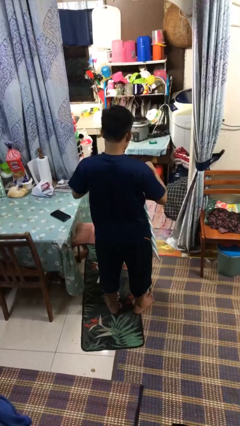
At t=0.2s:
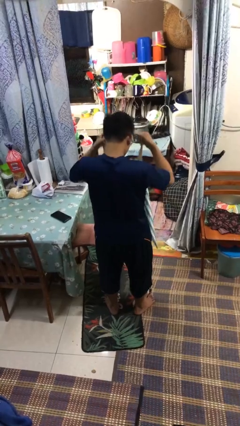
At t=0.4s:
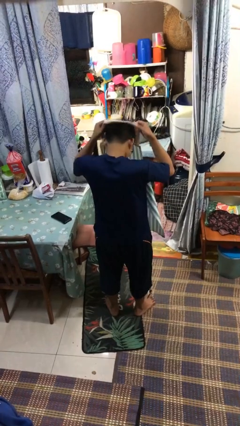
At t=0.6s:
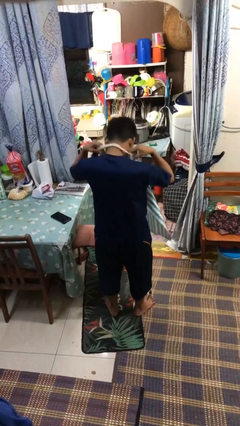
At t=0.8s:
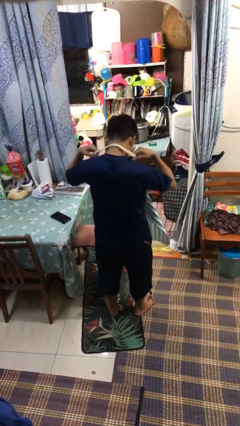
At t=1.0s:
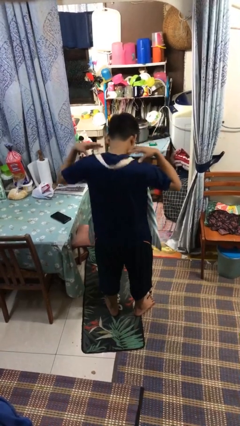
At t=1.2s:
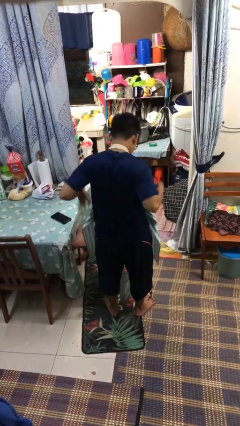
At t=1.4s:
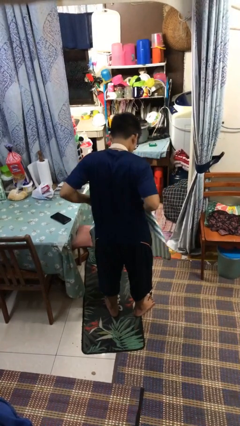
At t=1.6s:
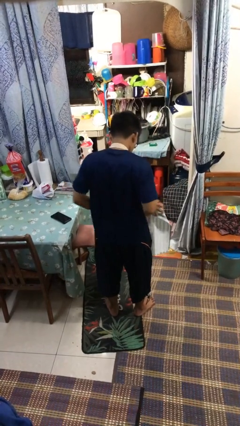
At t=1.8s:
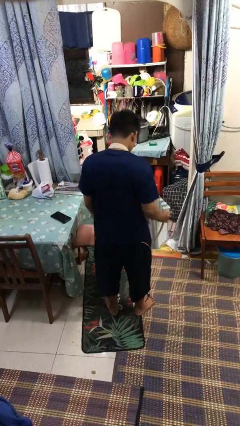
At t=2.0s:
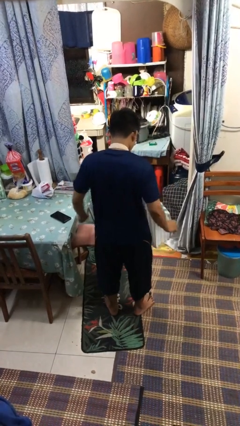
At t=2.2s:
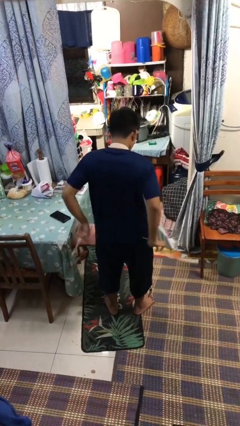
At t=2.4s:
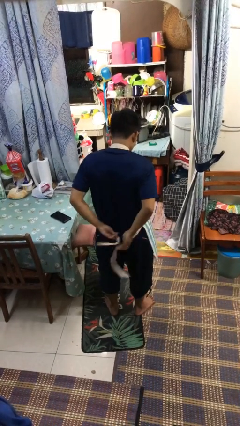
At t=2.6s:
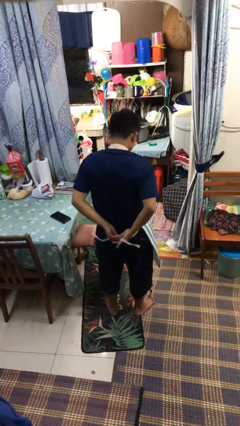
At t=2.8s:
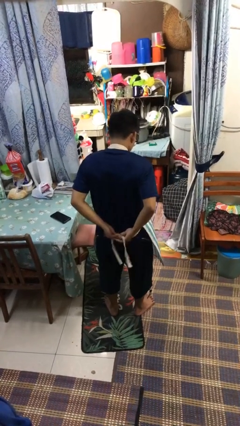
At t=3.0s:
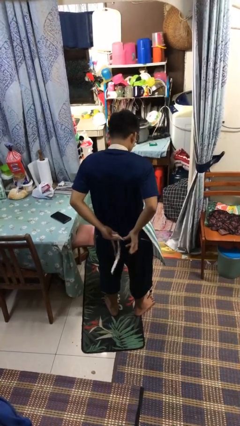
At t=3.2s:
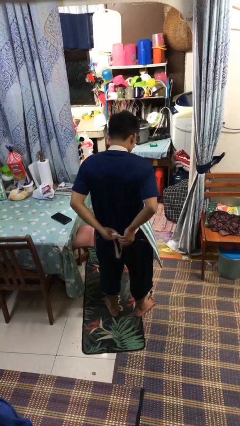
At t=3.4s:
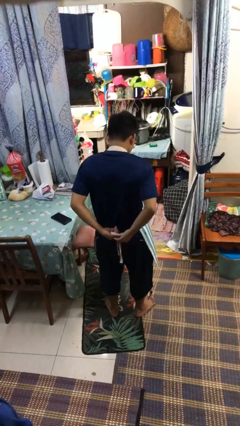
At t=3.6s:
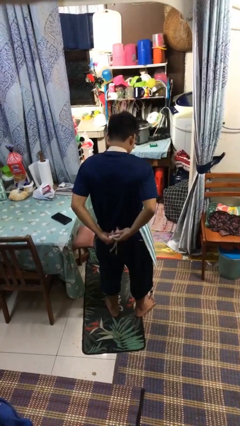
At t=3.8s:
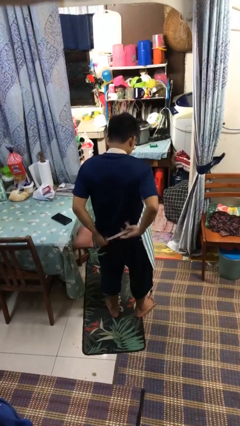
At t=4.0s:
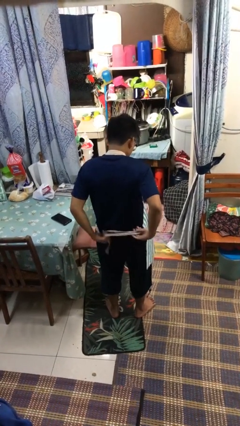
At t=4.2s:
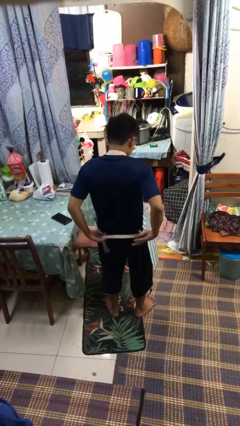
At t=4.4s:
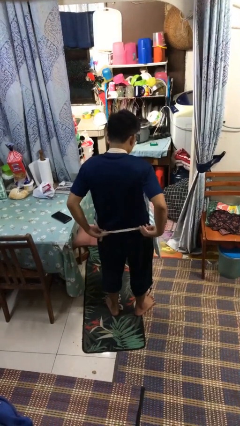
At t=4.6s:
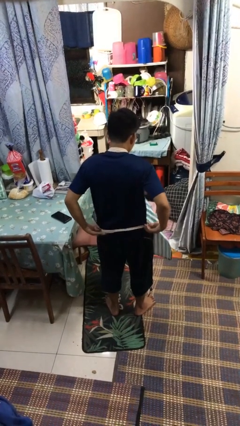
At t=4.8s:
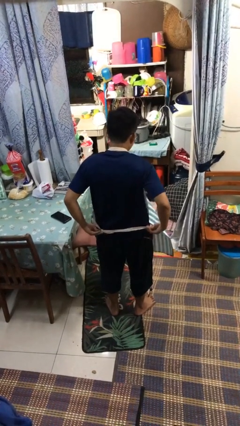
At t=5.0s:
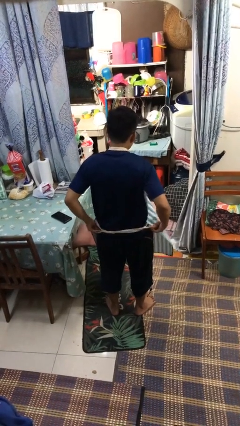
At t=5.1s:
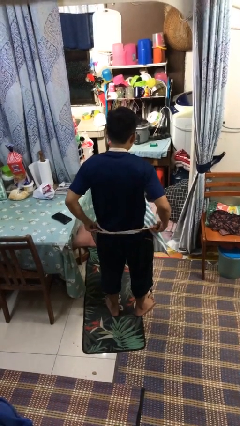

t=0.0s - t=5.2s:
person puts on apron

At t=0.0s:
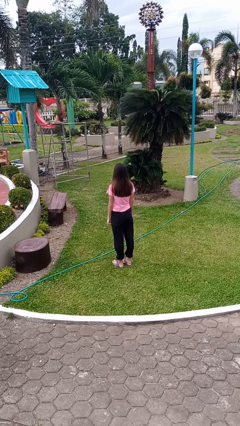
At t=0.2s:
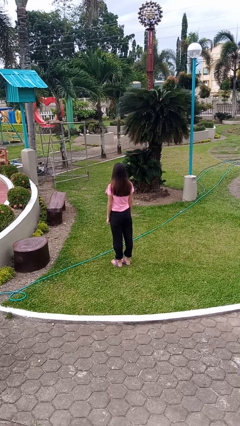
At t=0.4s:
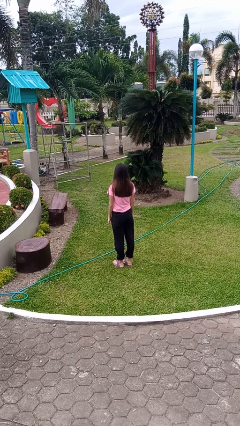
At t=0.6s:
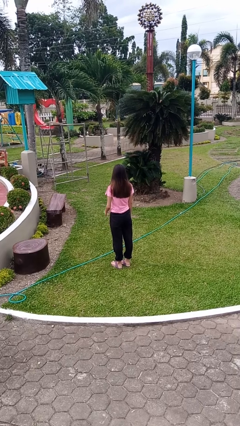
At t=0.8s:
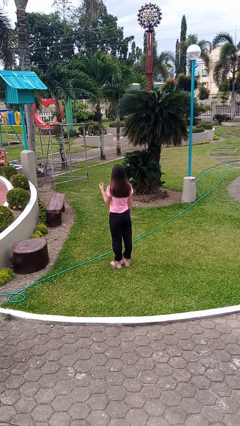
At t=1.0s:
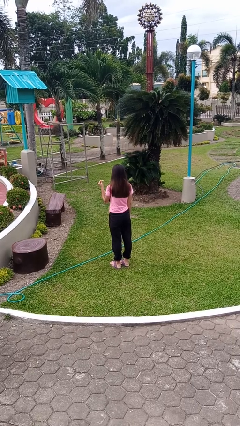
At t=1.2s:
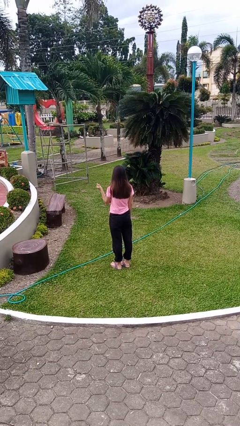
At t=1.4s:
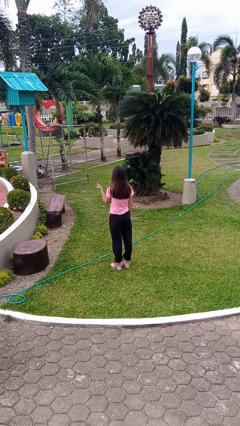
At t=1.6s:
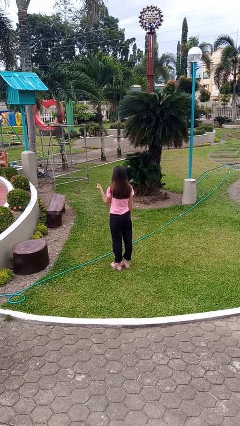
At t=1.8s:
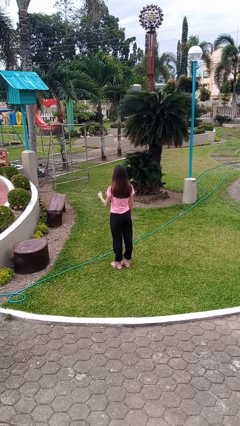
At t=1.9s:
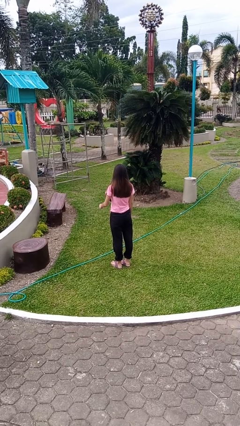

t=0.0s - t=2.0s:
person snaps fingers

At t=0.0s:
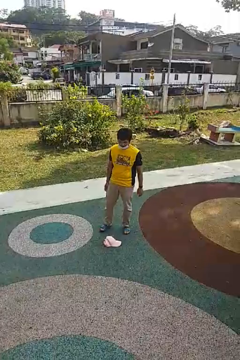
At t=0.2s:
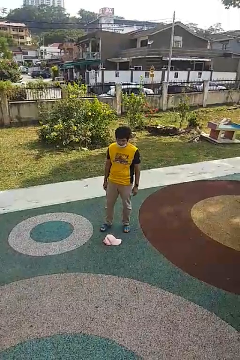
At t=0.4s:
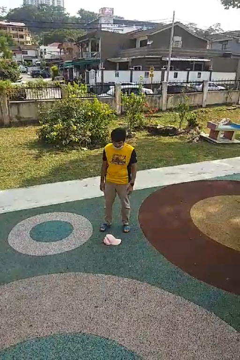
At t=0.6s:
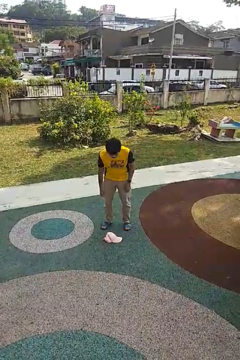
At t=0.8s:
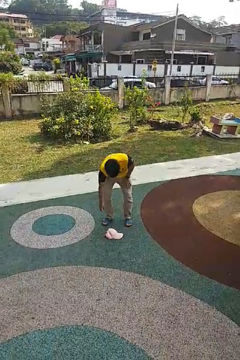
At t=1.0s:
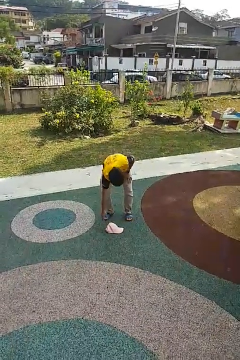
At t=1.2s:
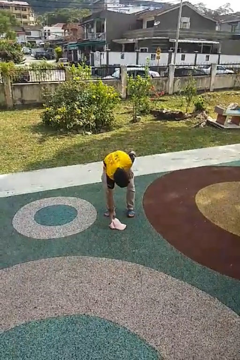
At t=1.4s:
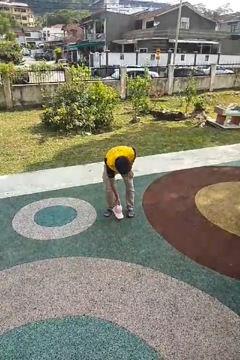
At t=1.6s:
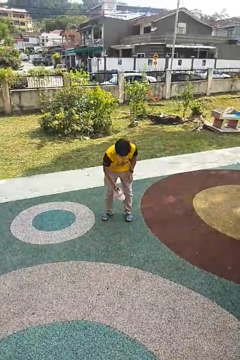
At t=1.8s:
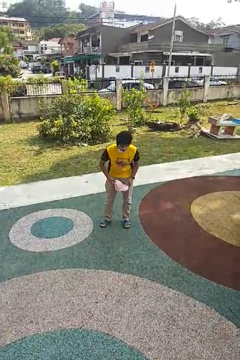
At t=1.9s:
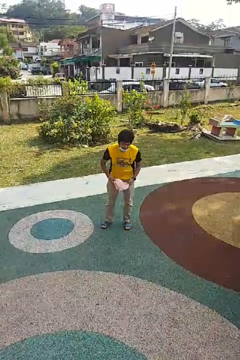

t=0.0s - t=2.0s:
person picks up object from floor

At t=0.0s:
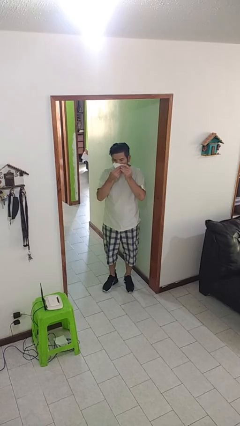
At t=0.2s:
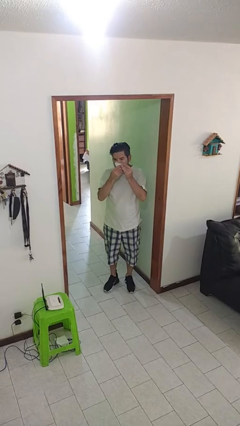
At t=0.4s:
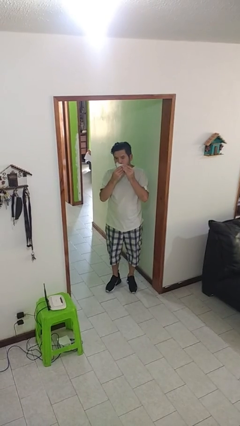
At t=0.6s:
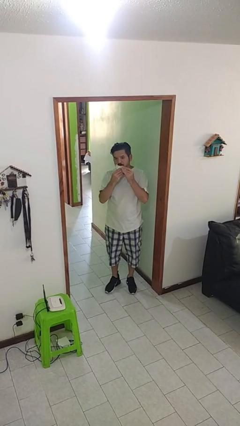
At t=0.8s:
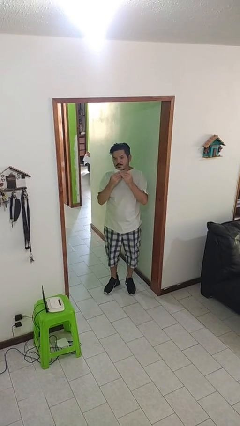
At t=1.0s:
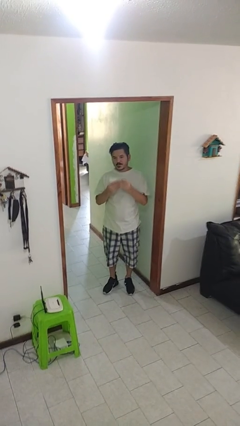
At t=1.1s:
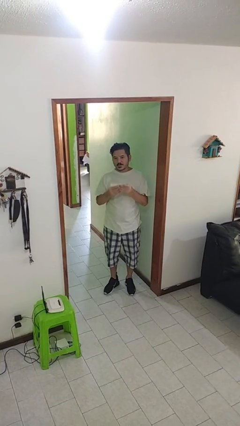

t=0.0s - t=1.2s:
person wipes mouth with napkin

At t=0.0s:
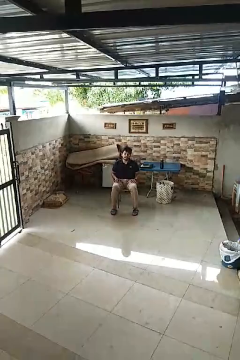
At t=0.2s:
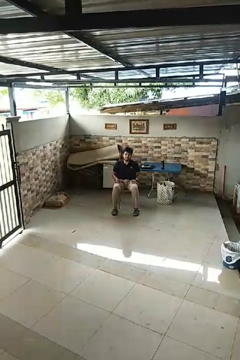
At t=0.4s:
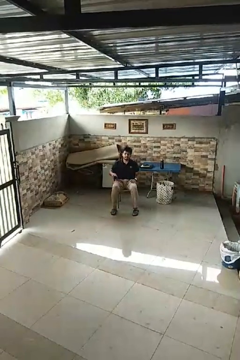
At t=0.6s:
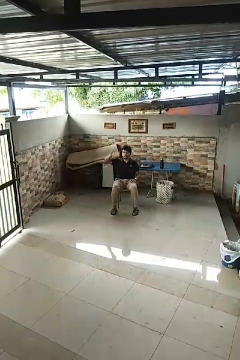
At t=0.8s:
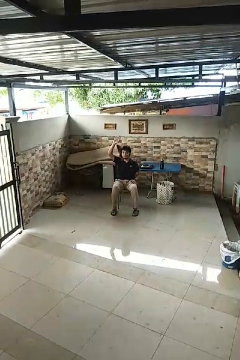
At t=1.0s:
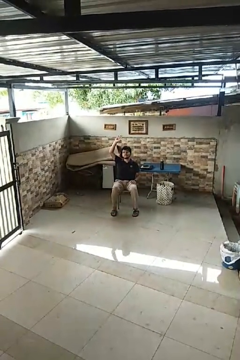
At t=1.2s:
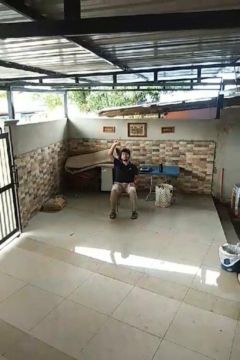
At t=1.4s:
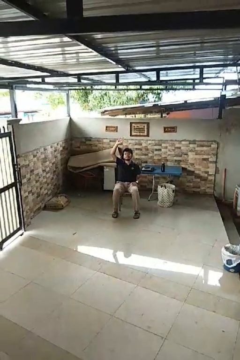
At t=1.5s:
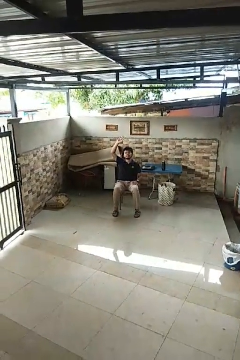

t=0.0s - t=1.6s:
person gestures raise hand

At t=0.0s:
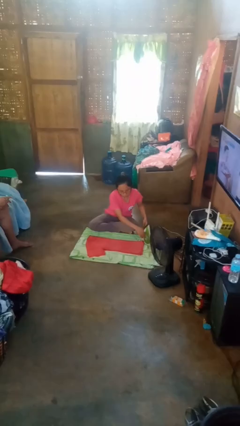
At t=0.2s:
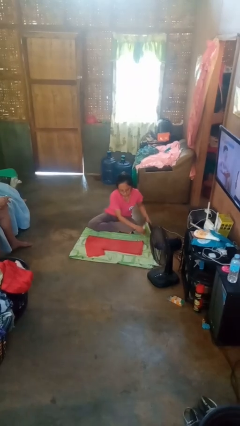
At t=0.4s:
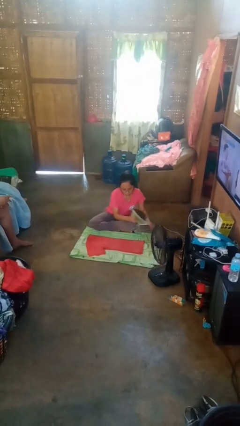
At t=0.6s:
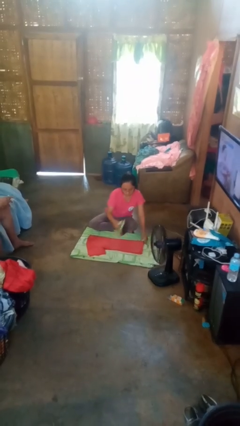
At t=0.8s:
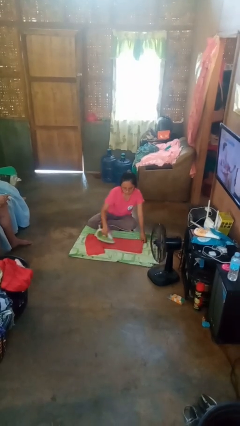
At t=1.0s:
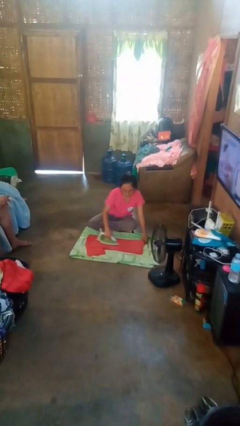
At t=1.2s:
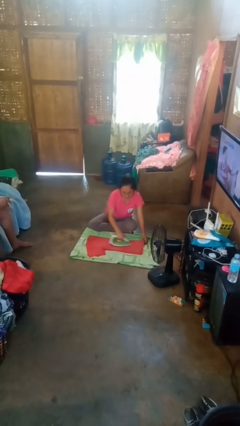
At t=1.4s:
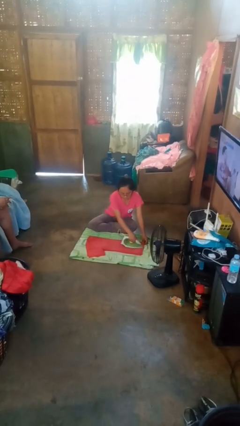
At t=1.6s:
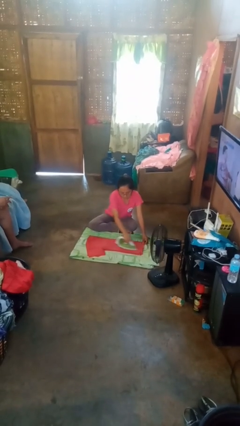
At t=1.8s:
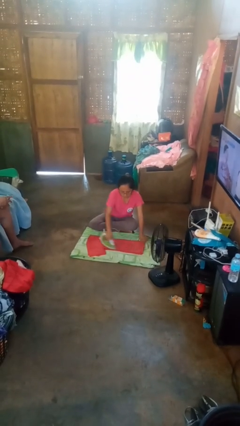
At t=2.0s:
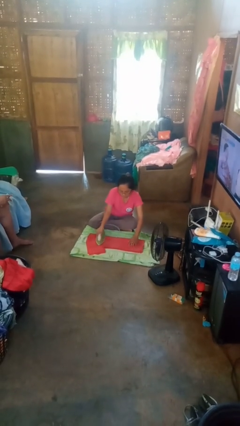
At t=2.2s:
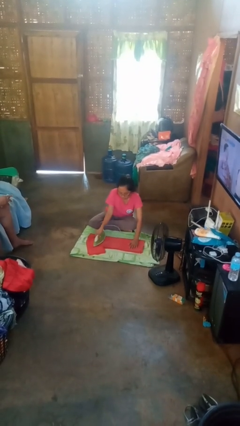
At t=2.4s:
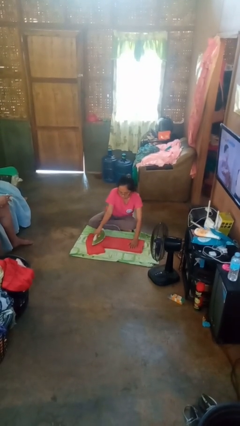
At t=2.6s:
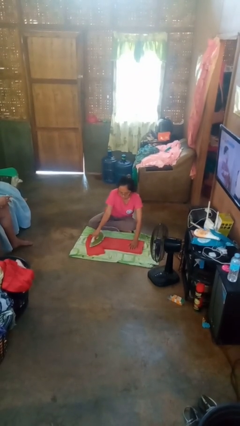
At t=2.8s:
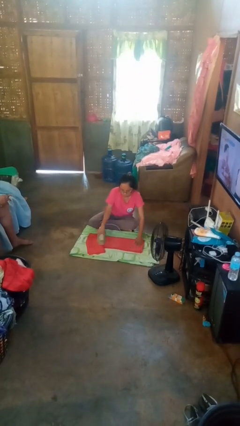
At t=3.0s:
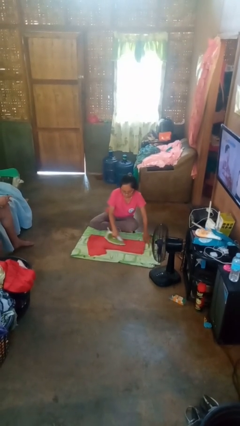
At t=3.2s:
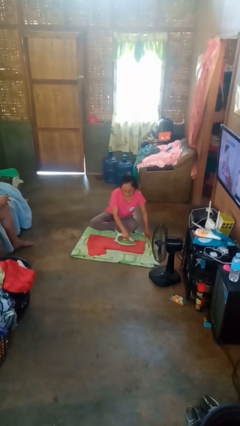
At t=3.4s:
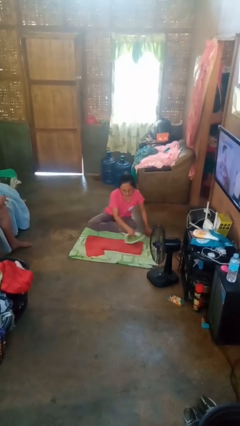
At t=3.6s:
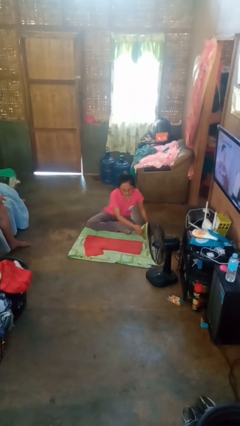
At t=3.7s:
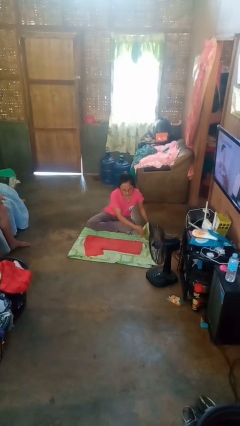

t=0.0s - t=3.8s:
person irons clothes

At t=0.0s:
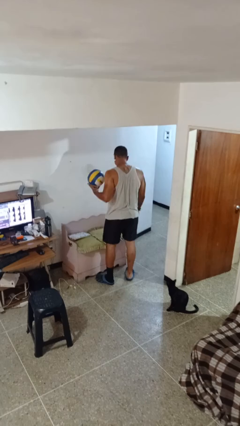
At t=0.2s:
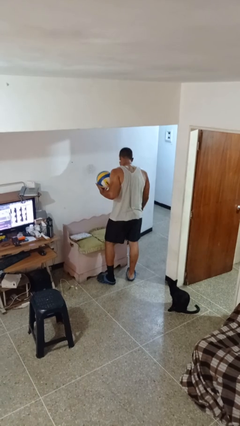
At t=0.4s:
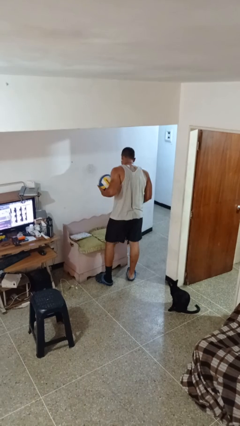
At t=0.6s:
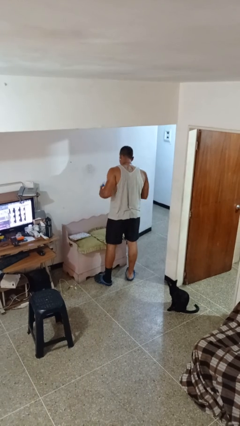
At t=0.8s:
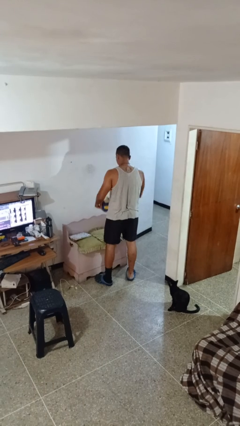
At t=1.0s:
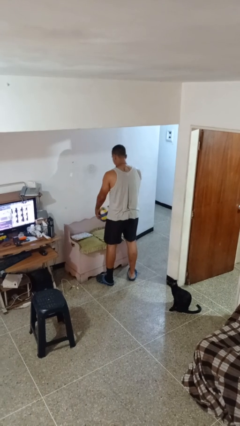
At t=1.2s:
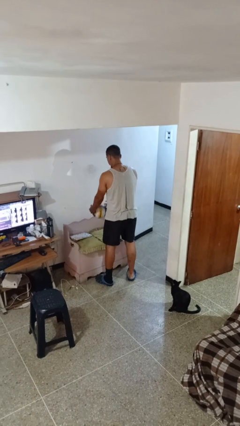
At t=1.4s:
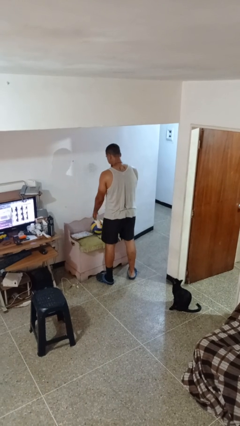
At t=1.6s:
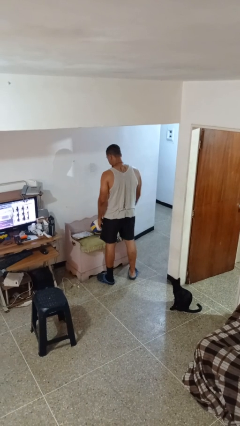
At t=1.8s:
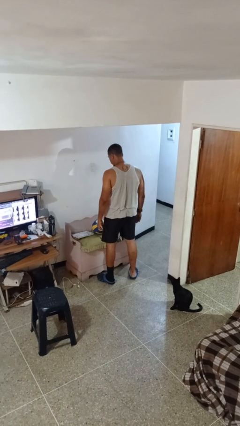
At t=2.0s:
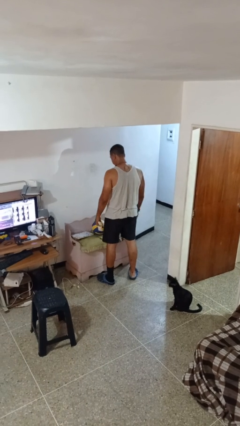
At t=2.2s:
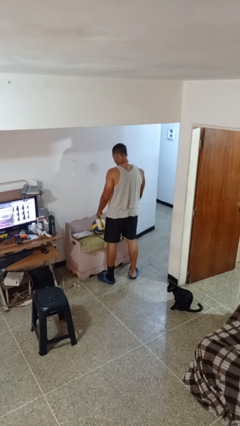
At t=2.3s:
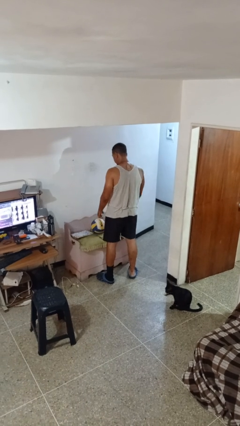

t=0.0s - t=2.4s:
person puts down object on couch
